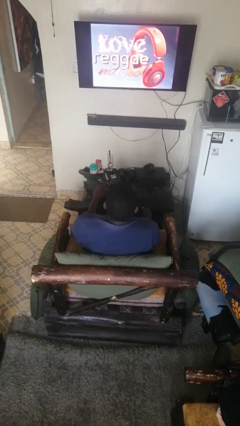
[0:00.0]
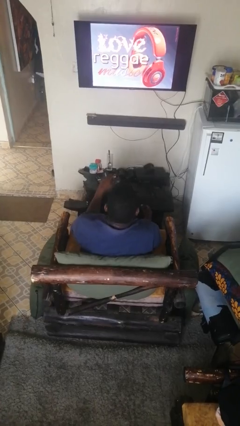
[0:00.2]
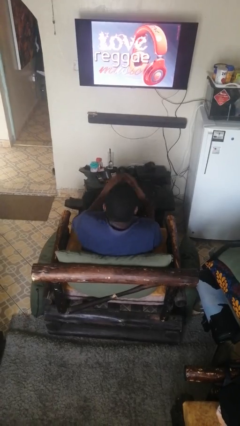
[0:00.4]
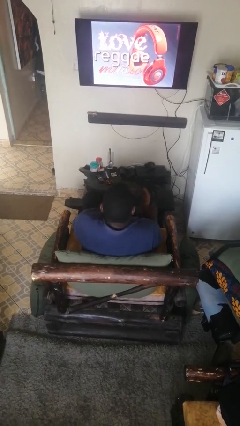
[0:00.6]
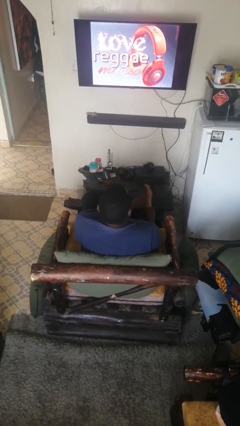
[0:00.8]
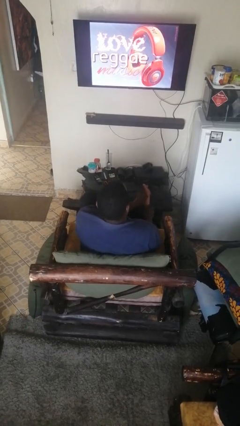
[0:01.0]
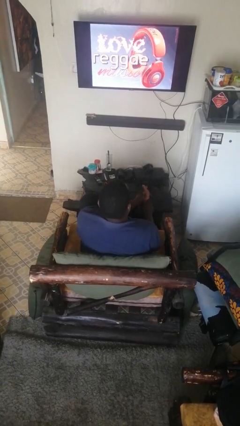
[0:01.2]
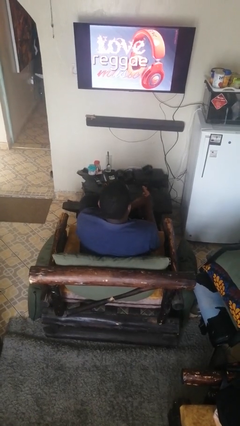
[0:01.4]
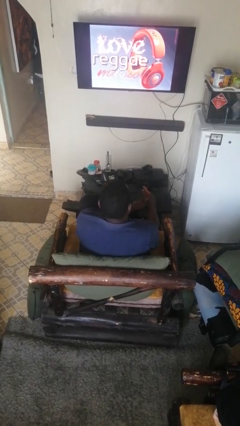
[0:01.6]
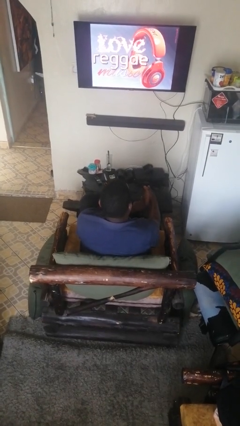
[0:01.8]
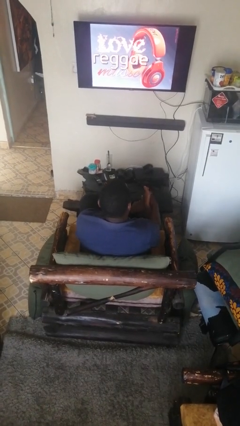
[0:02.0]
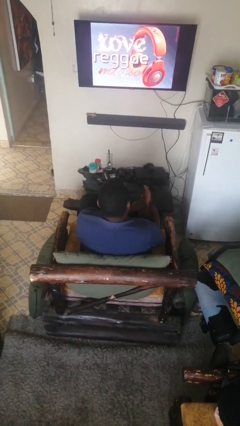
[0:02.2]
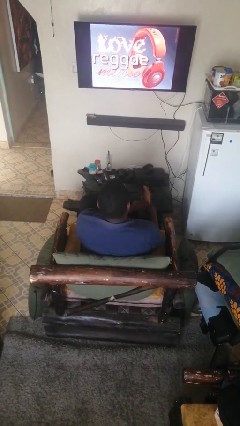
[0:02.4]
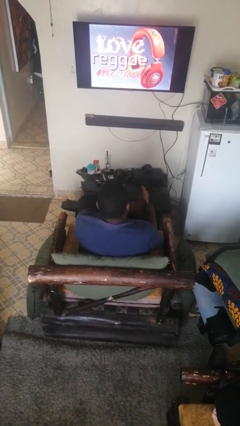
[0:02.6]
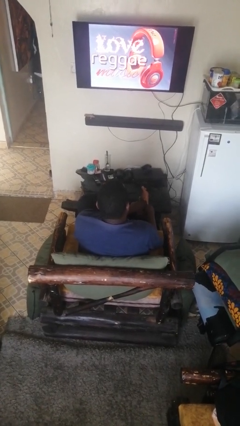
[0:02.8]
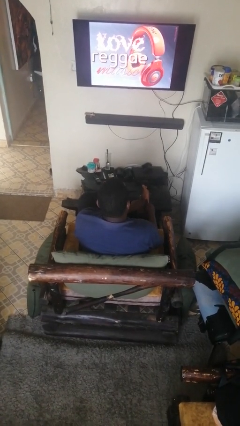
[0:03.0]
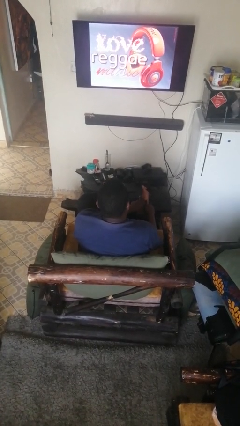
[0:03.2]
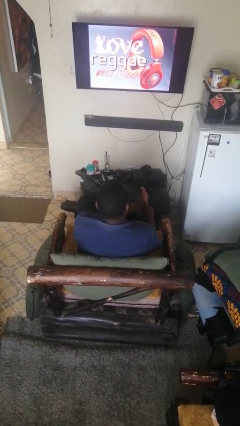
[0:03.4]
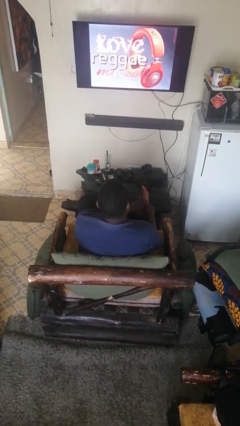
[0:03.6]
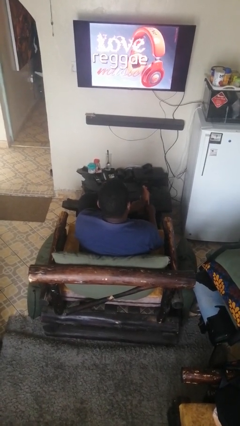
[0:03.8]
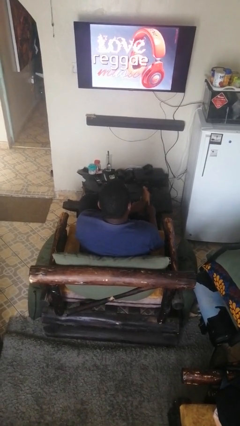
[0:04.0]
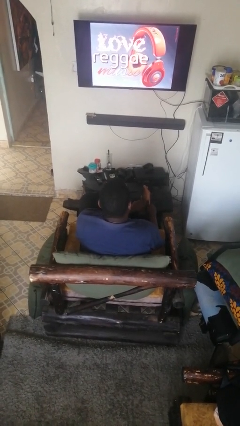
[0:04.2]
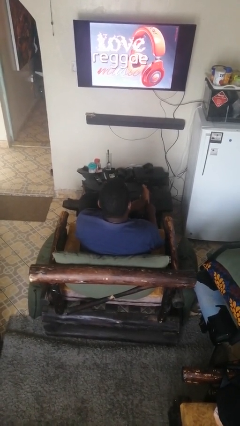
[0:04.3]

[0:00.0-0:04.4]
person rubs foot

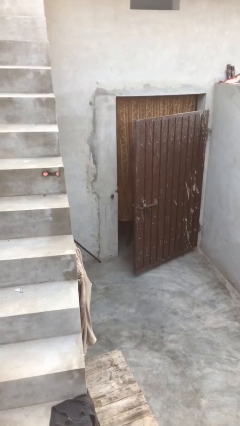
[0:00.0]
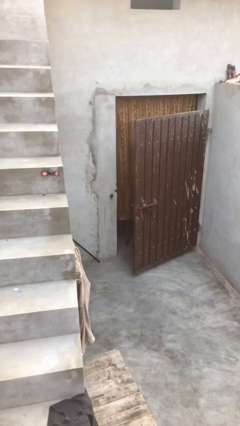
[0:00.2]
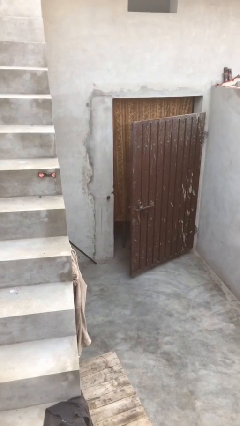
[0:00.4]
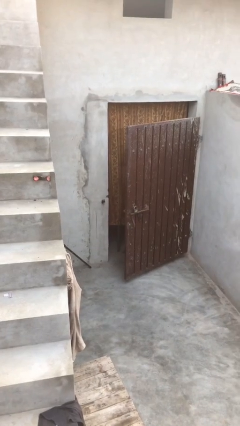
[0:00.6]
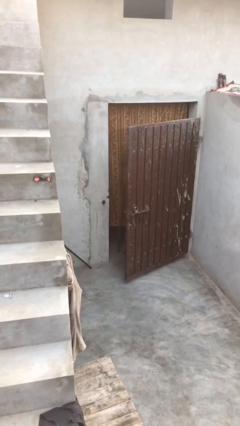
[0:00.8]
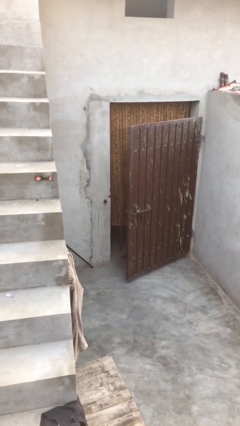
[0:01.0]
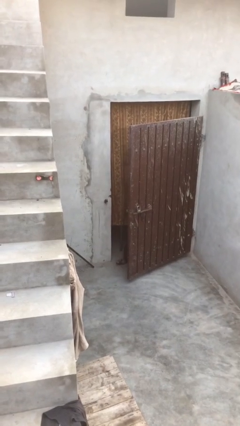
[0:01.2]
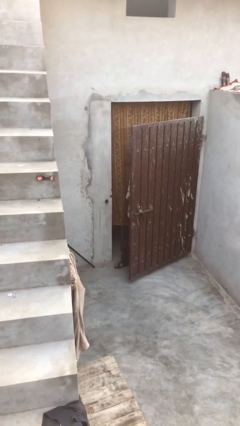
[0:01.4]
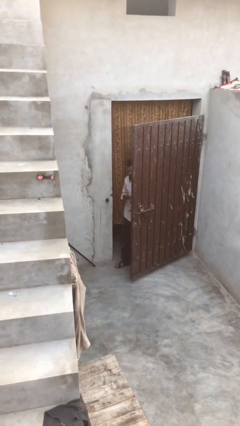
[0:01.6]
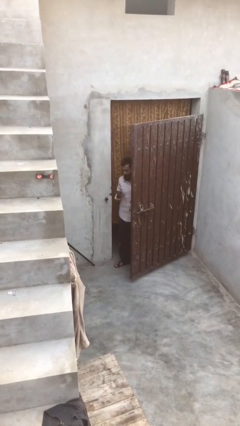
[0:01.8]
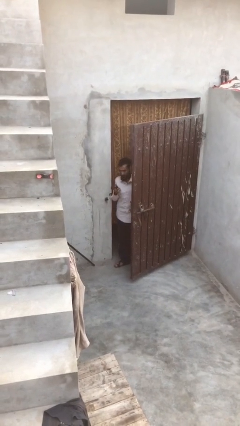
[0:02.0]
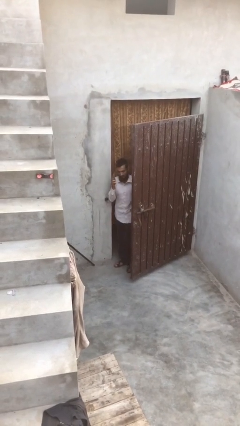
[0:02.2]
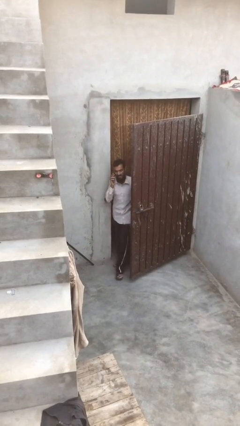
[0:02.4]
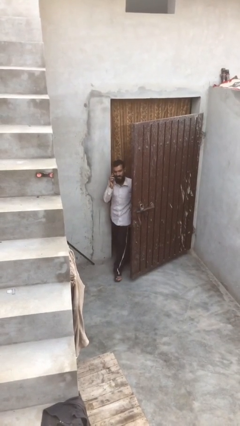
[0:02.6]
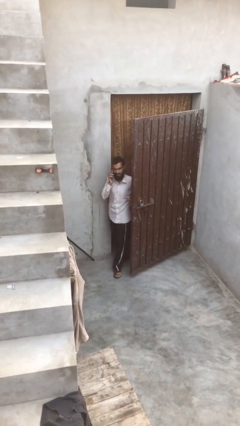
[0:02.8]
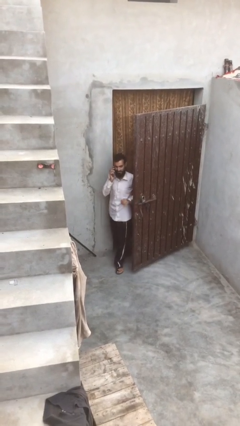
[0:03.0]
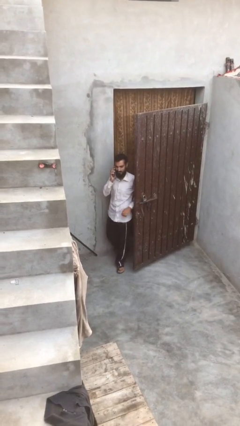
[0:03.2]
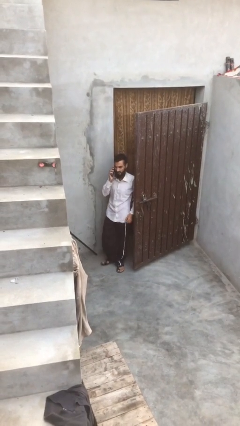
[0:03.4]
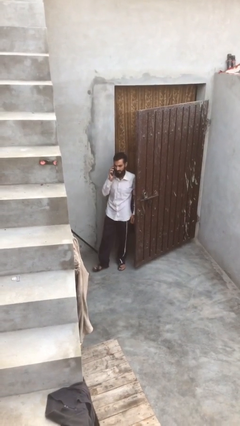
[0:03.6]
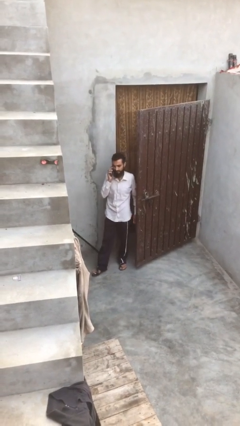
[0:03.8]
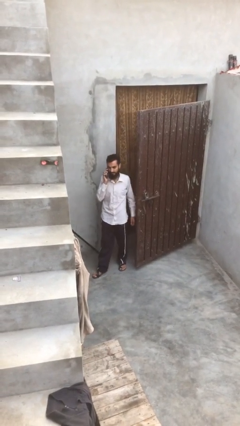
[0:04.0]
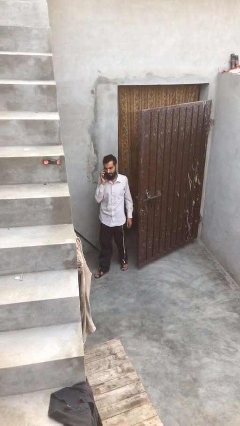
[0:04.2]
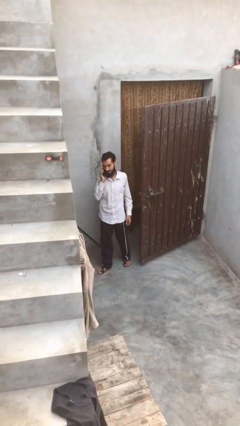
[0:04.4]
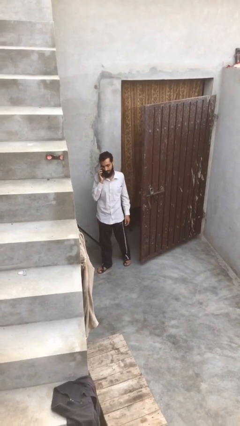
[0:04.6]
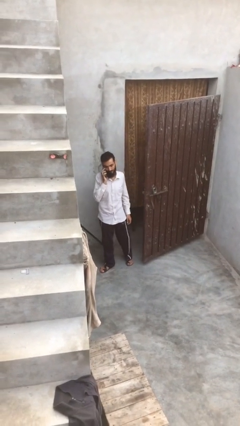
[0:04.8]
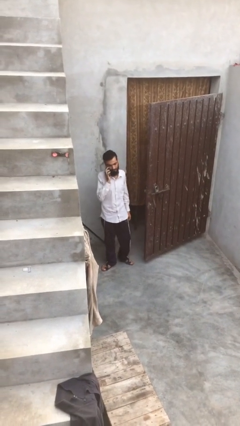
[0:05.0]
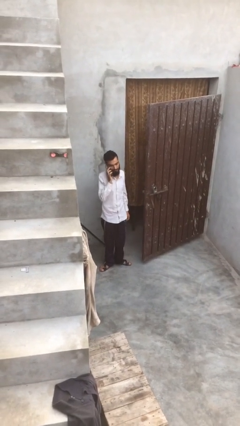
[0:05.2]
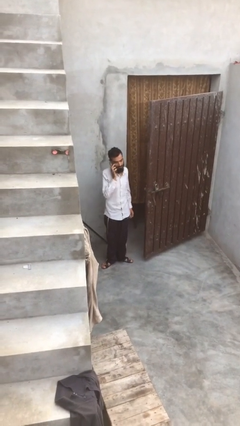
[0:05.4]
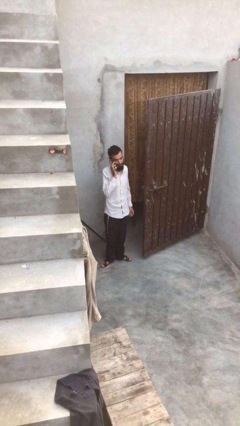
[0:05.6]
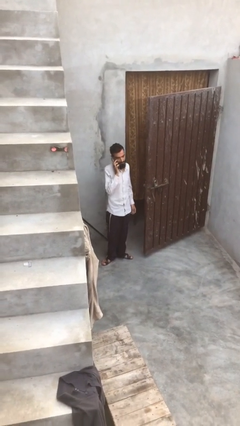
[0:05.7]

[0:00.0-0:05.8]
person enters scene through structure

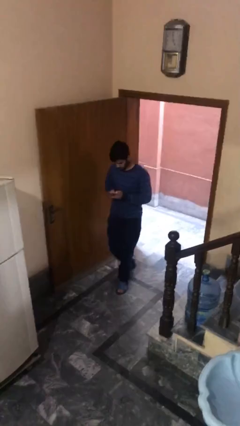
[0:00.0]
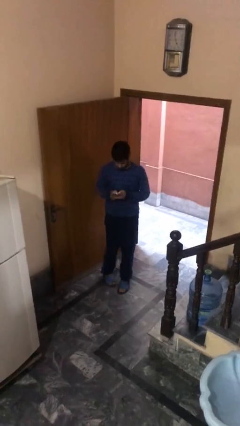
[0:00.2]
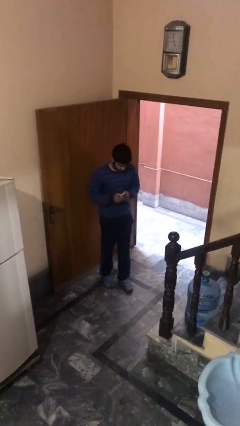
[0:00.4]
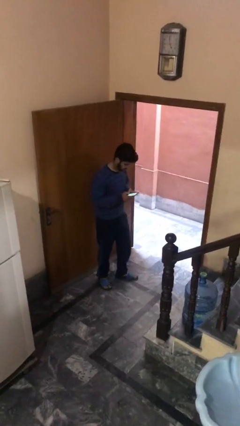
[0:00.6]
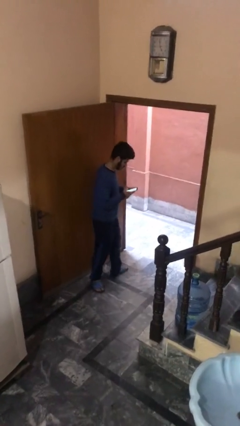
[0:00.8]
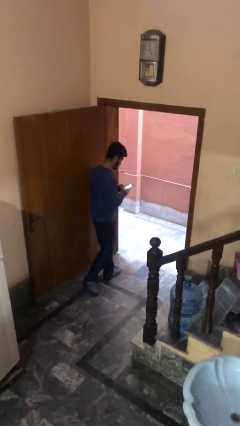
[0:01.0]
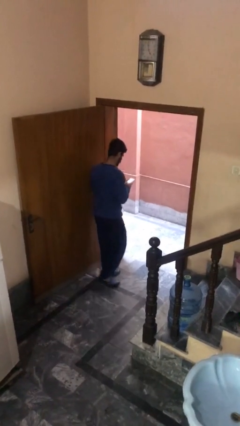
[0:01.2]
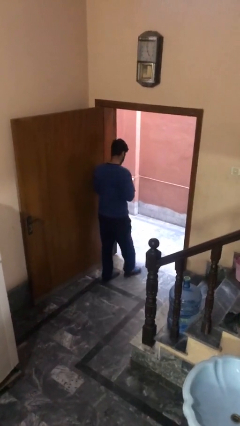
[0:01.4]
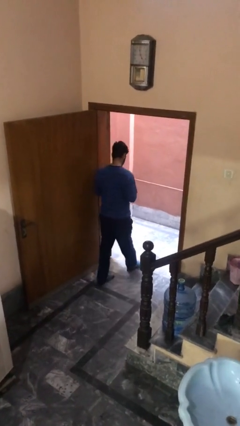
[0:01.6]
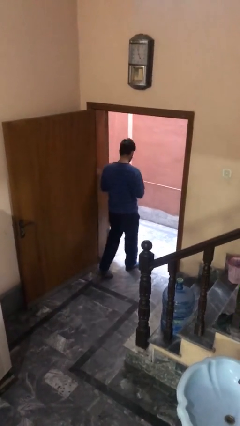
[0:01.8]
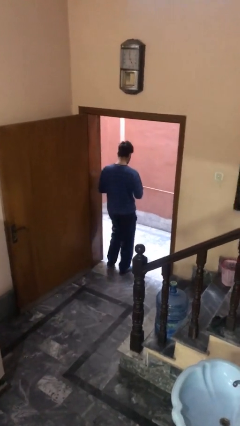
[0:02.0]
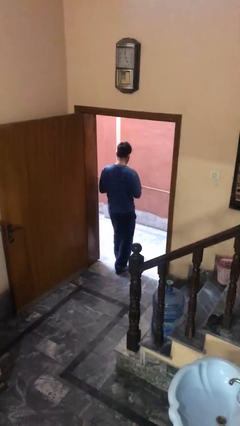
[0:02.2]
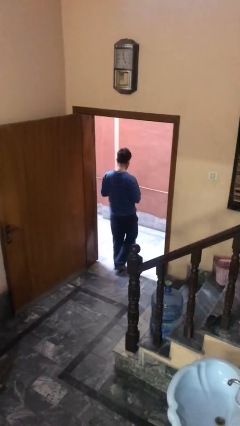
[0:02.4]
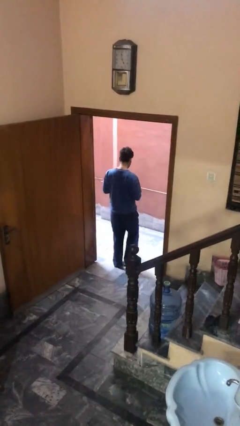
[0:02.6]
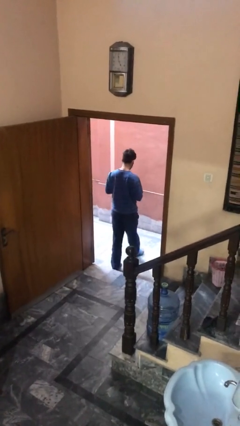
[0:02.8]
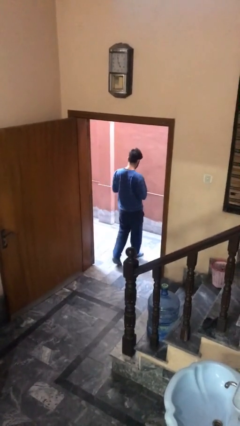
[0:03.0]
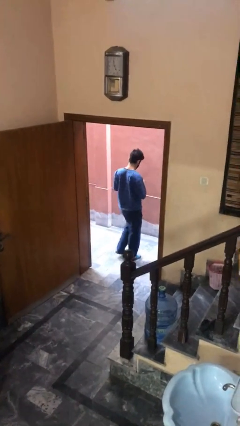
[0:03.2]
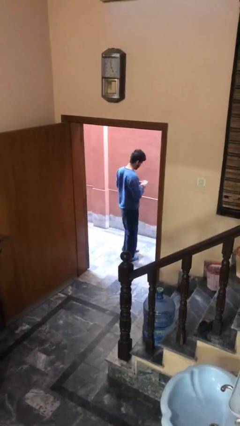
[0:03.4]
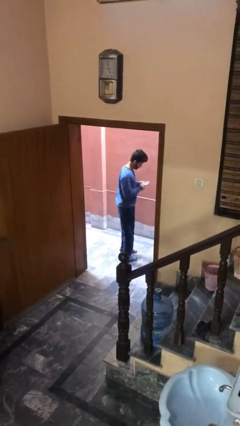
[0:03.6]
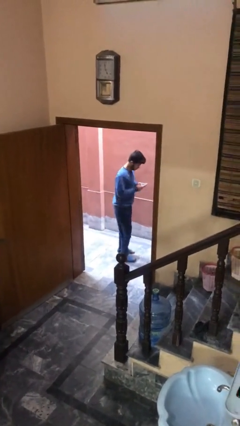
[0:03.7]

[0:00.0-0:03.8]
person exits scene through structure

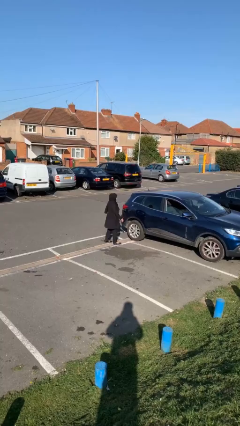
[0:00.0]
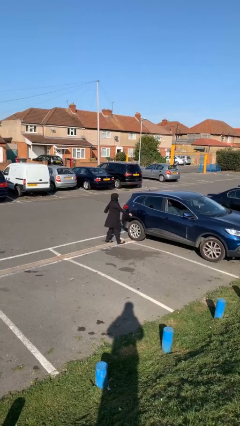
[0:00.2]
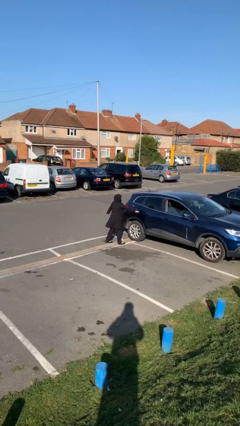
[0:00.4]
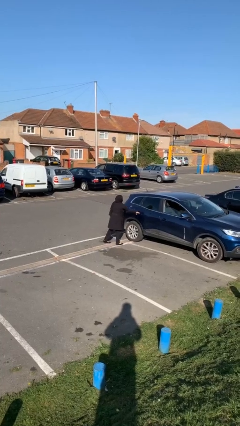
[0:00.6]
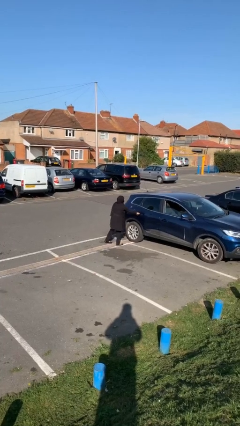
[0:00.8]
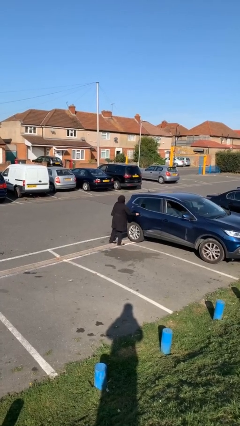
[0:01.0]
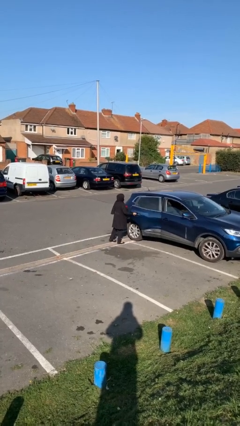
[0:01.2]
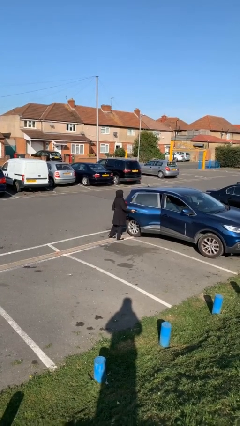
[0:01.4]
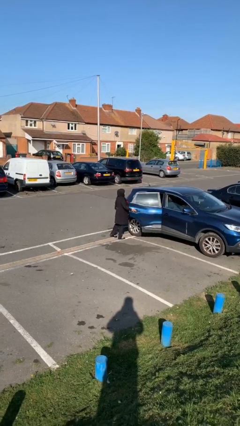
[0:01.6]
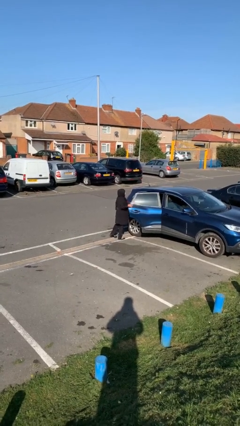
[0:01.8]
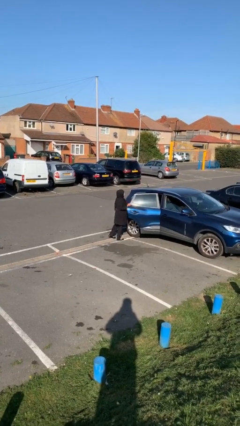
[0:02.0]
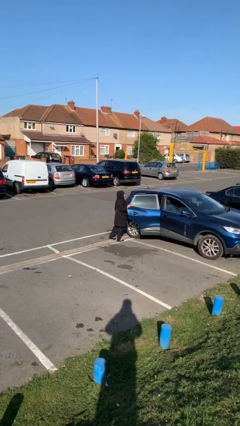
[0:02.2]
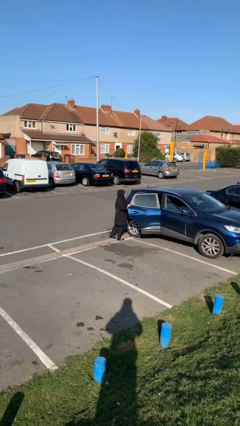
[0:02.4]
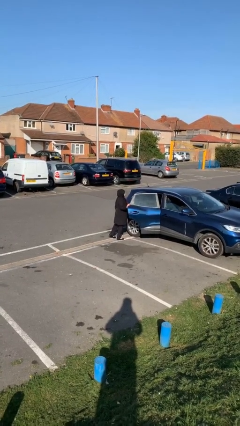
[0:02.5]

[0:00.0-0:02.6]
person opens car door

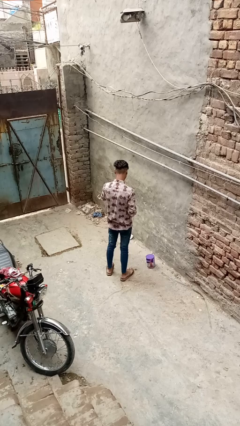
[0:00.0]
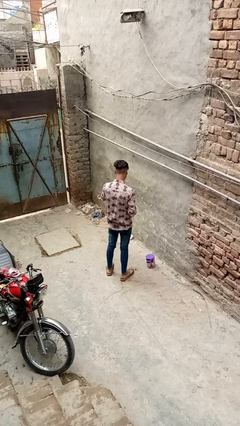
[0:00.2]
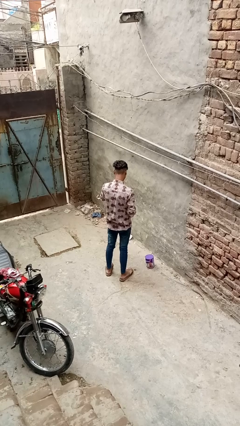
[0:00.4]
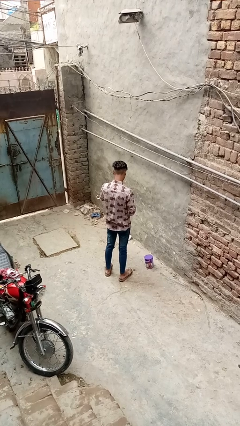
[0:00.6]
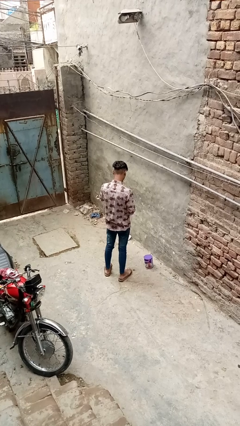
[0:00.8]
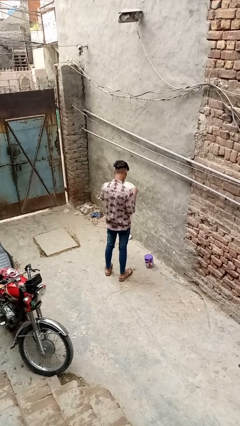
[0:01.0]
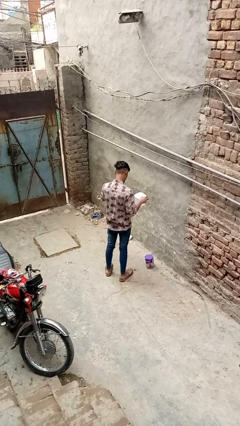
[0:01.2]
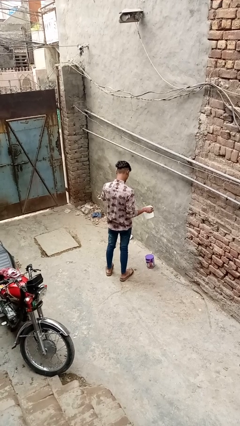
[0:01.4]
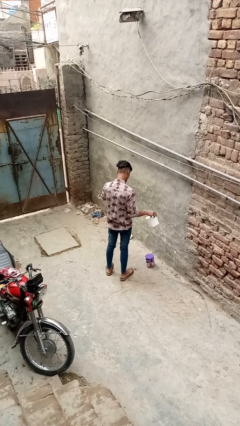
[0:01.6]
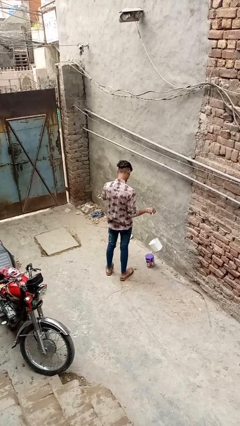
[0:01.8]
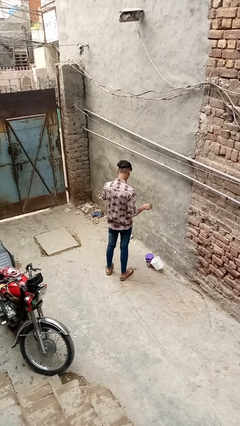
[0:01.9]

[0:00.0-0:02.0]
person discards trash
